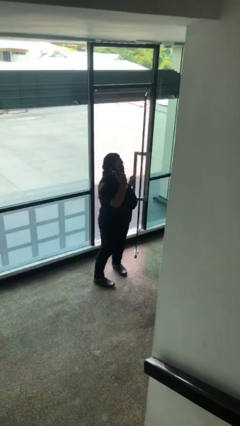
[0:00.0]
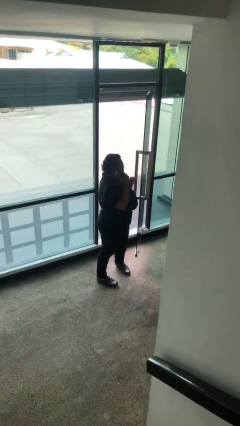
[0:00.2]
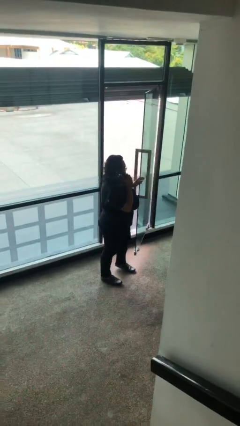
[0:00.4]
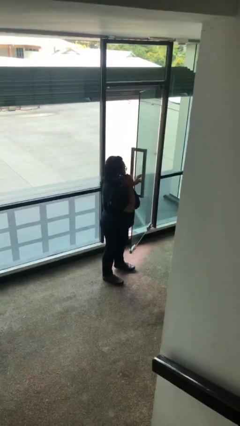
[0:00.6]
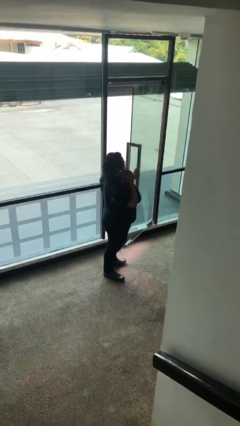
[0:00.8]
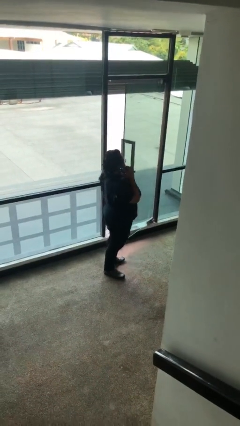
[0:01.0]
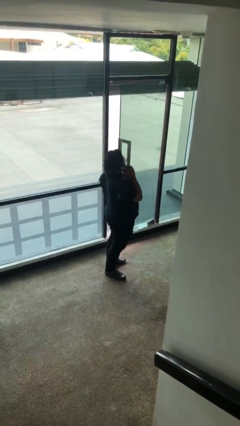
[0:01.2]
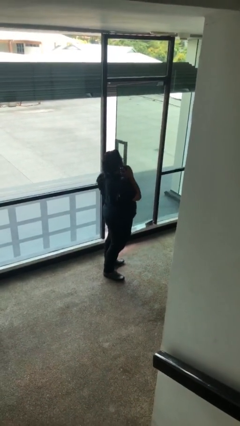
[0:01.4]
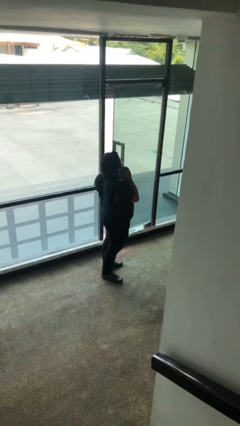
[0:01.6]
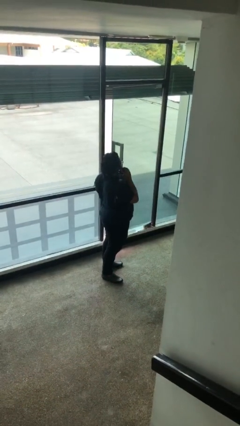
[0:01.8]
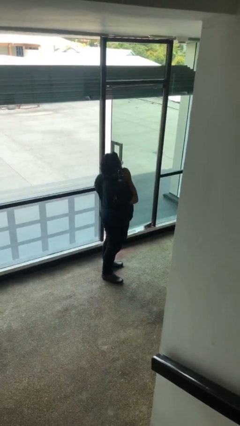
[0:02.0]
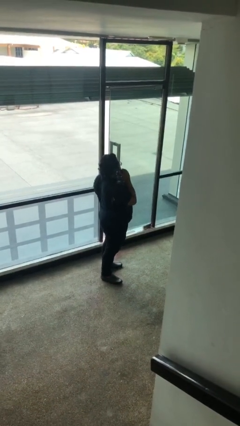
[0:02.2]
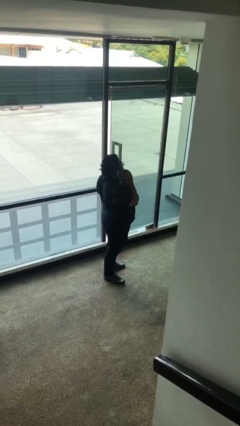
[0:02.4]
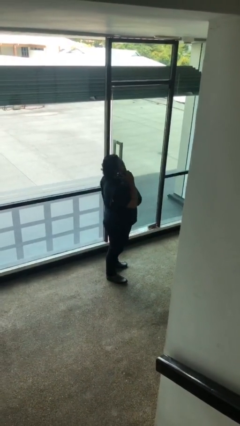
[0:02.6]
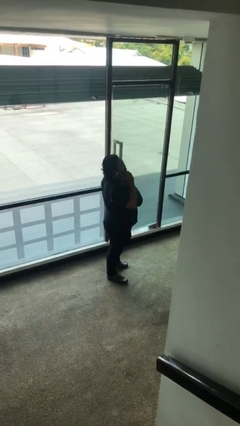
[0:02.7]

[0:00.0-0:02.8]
person closes facility door

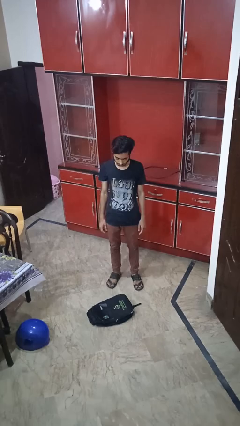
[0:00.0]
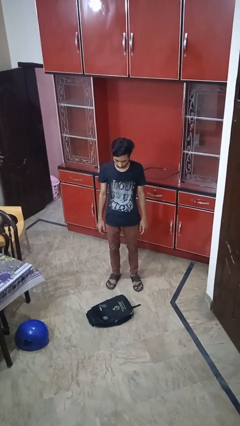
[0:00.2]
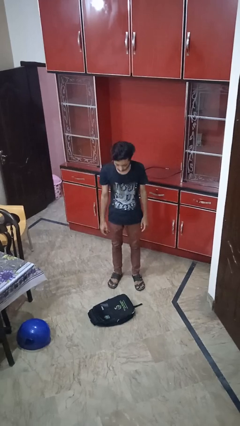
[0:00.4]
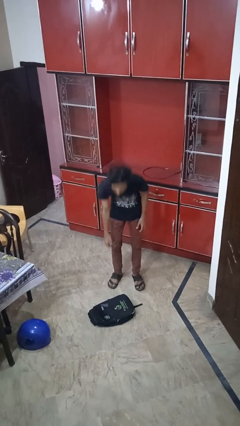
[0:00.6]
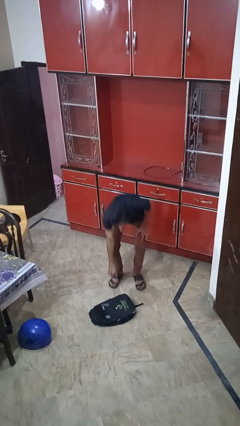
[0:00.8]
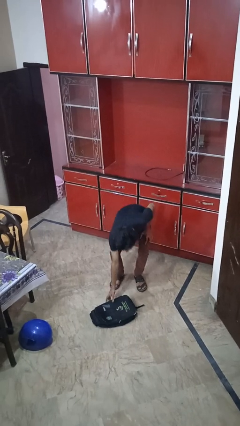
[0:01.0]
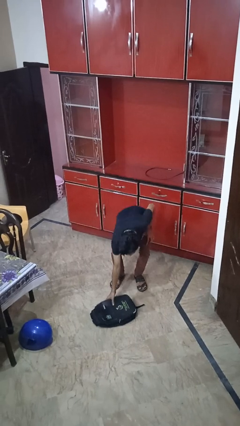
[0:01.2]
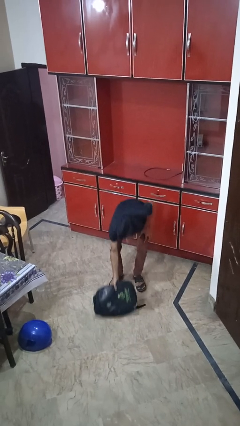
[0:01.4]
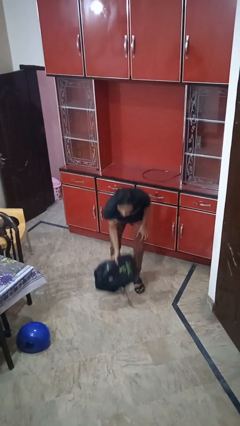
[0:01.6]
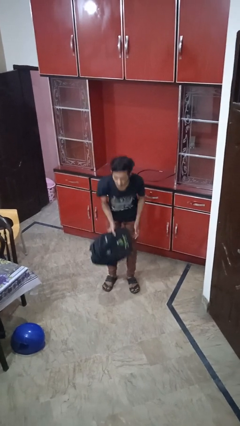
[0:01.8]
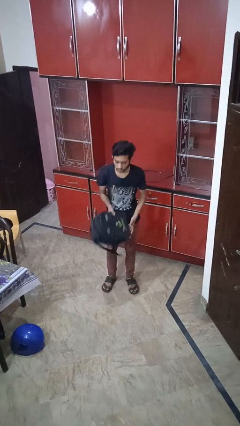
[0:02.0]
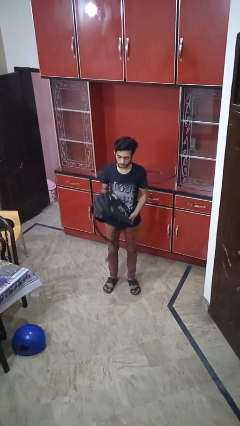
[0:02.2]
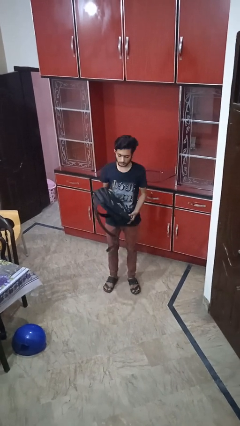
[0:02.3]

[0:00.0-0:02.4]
person picks up object from floor

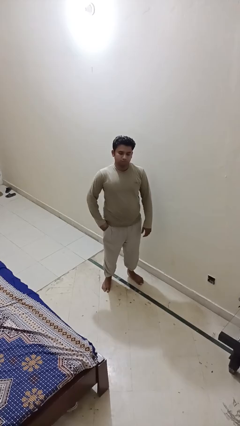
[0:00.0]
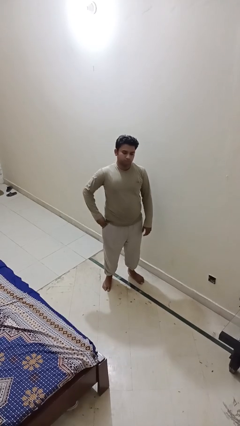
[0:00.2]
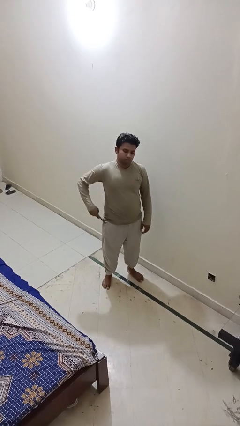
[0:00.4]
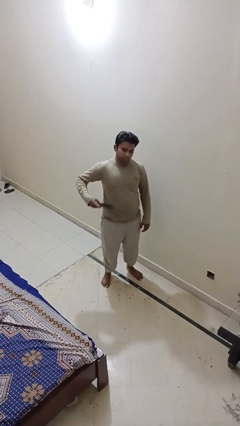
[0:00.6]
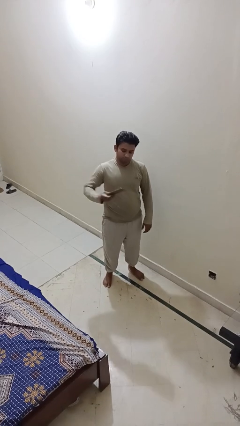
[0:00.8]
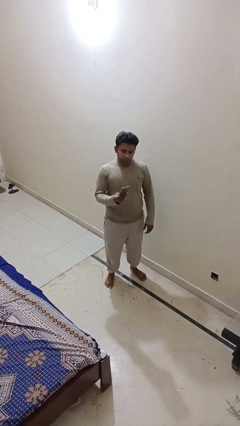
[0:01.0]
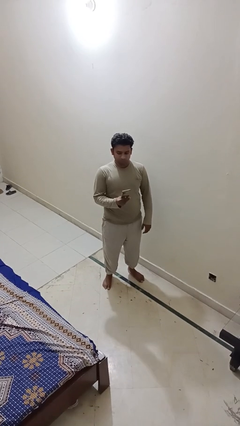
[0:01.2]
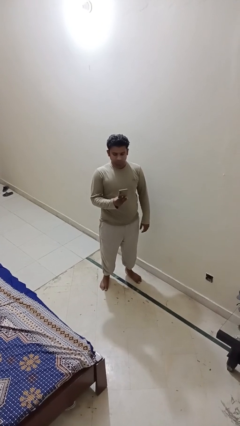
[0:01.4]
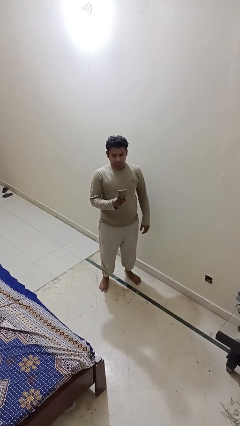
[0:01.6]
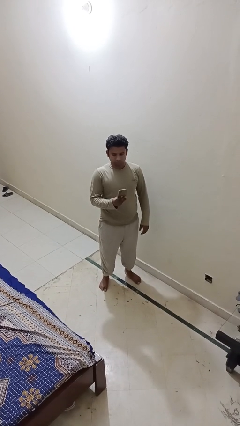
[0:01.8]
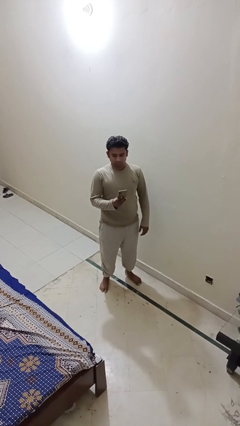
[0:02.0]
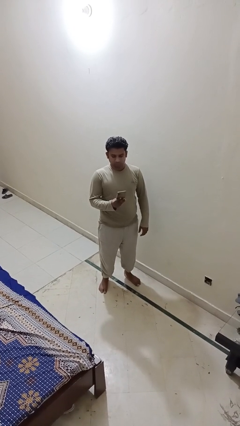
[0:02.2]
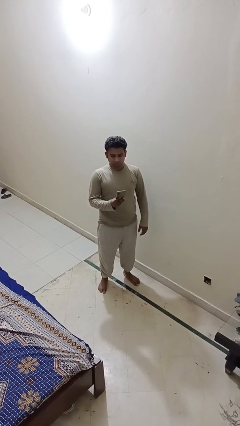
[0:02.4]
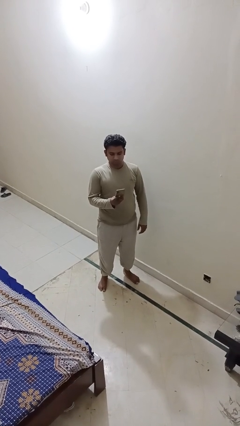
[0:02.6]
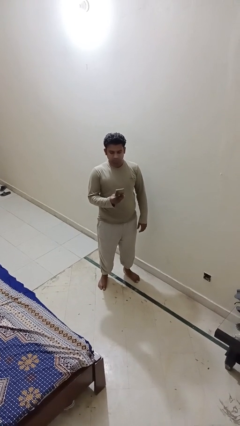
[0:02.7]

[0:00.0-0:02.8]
person takes phone from pocket

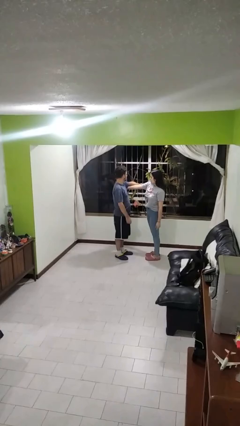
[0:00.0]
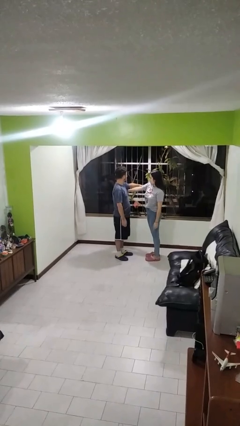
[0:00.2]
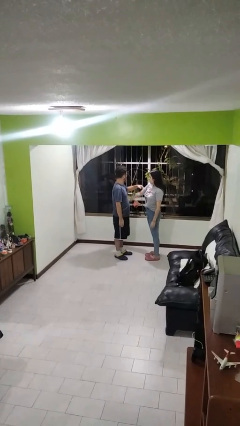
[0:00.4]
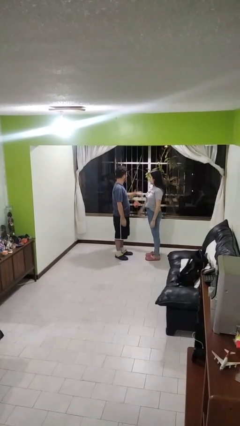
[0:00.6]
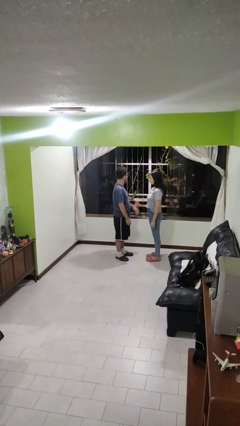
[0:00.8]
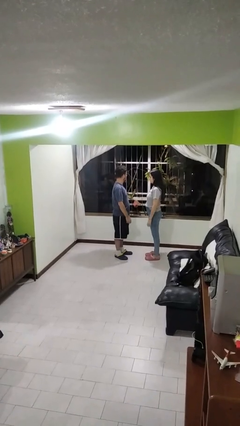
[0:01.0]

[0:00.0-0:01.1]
person grabs person by bicep

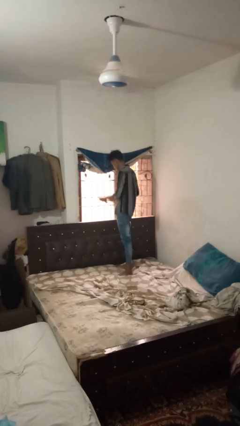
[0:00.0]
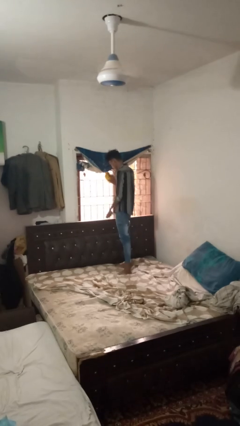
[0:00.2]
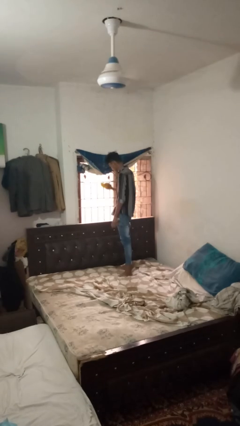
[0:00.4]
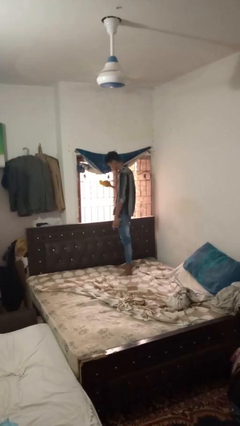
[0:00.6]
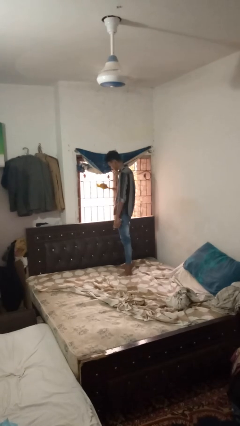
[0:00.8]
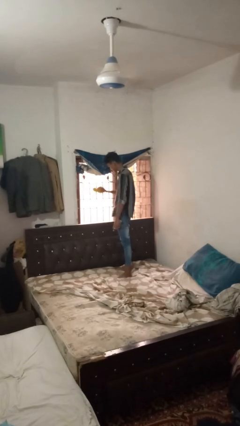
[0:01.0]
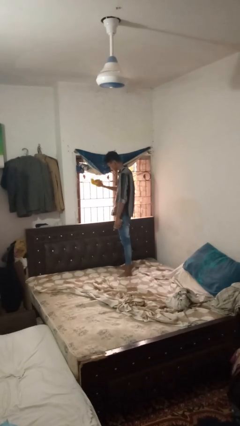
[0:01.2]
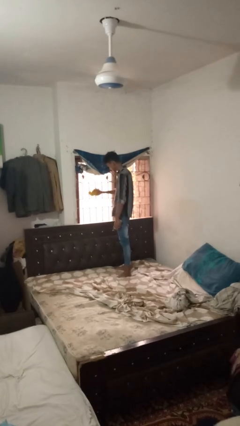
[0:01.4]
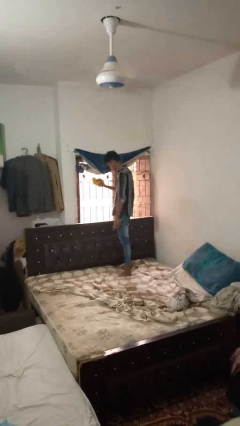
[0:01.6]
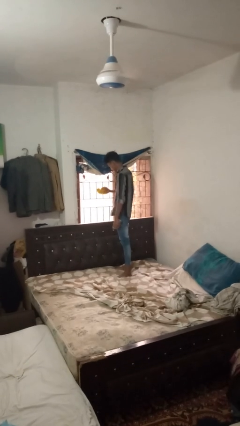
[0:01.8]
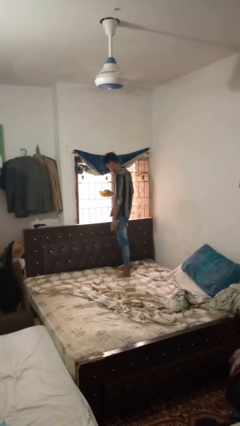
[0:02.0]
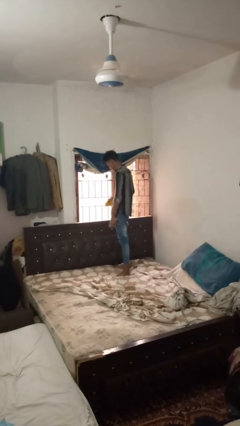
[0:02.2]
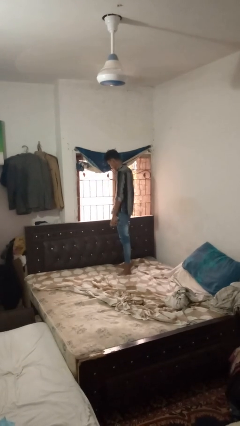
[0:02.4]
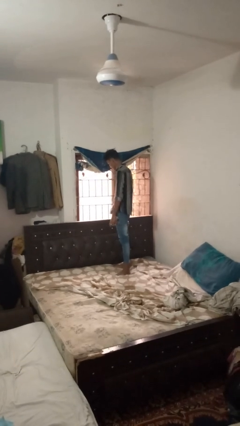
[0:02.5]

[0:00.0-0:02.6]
person washes window

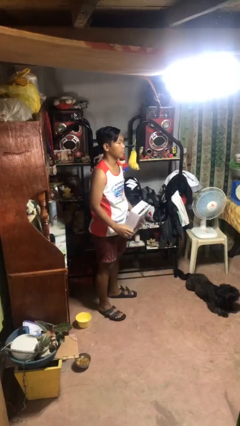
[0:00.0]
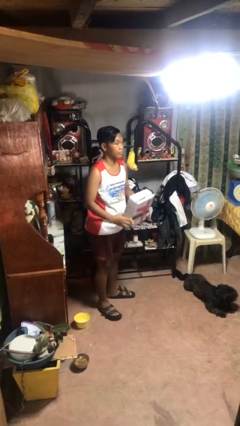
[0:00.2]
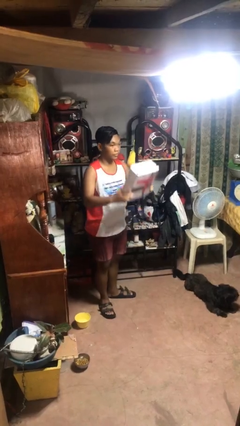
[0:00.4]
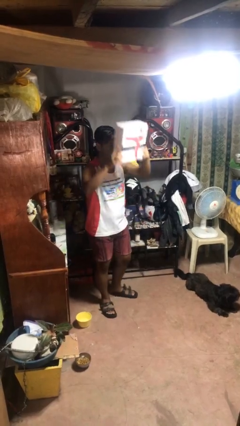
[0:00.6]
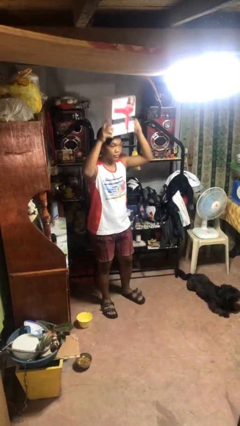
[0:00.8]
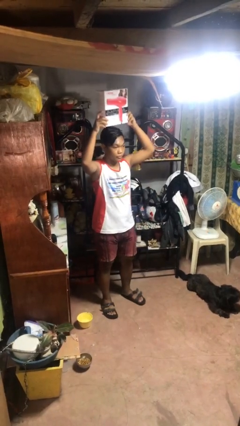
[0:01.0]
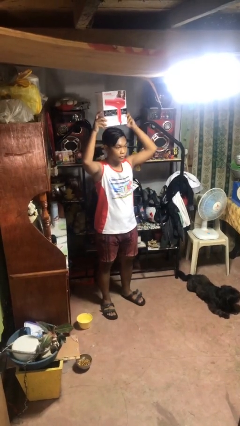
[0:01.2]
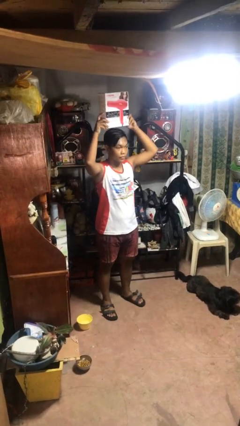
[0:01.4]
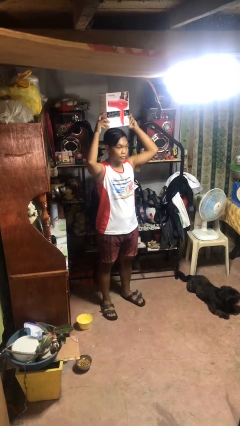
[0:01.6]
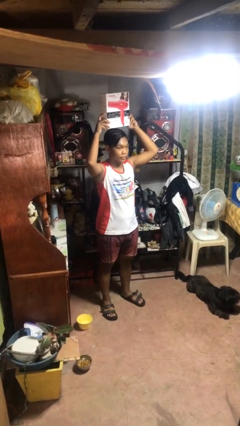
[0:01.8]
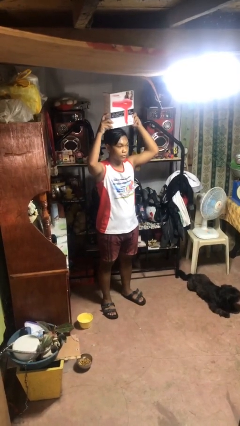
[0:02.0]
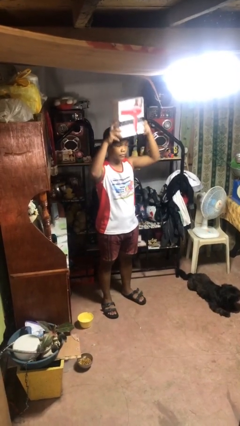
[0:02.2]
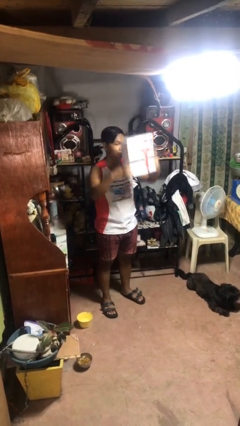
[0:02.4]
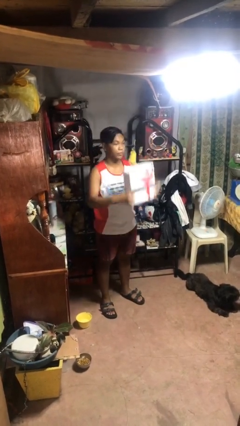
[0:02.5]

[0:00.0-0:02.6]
person holds object above head

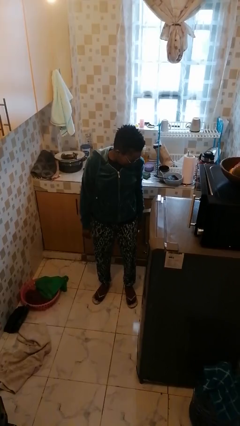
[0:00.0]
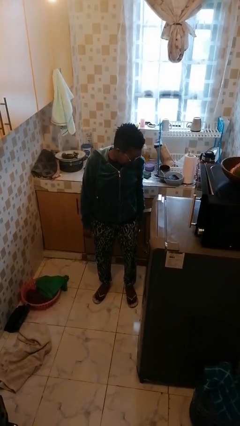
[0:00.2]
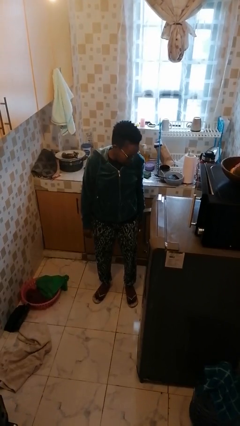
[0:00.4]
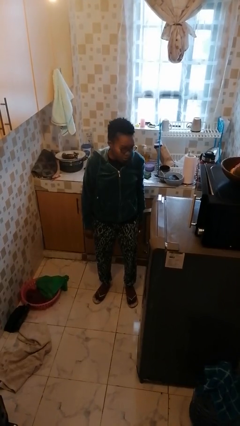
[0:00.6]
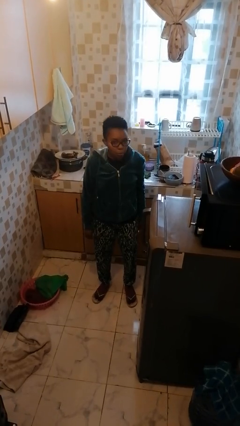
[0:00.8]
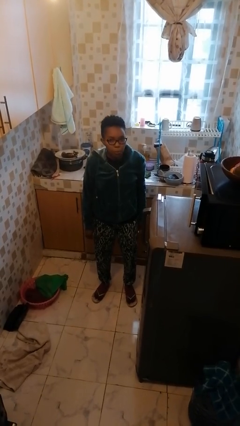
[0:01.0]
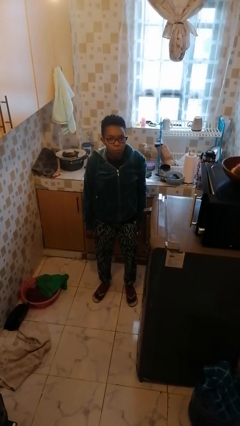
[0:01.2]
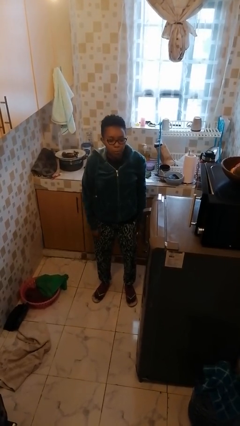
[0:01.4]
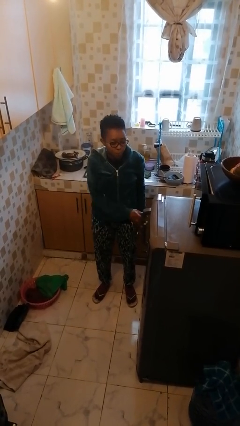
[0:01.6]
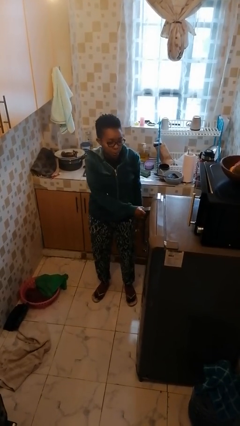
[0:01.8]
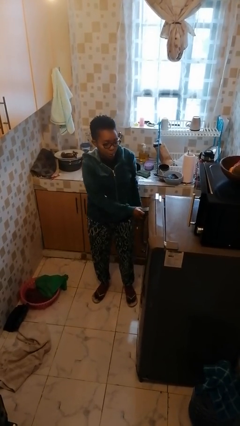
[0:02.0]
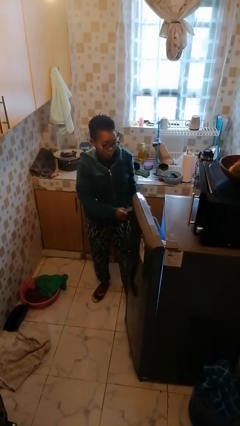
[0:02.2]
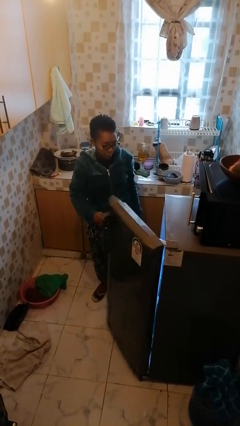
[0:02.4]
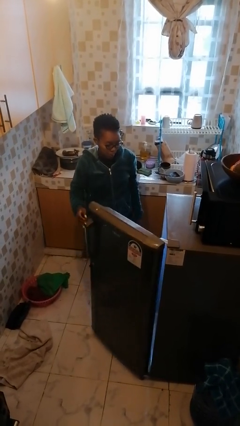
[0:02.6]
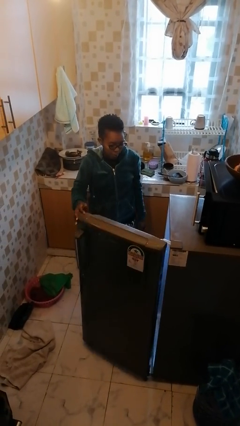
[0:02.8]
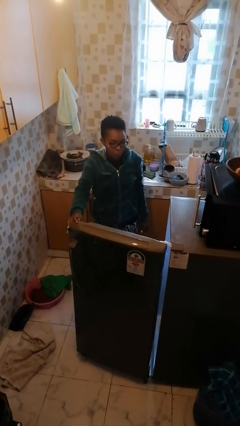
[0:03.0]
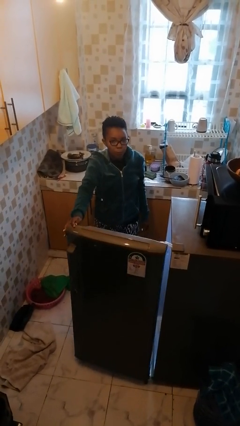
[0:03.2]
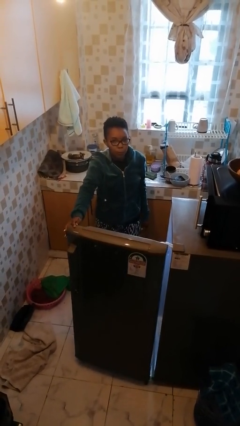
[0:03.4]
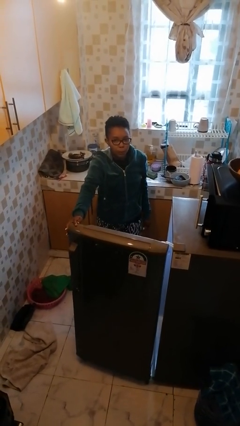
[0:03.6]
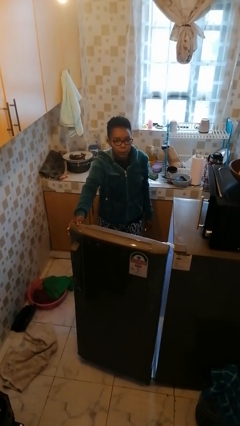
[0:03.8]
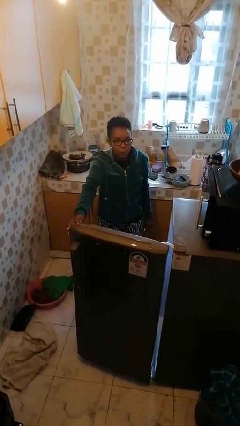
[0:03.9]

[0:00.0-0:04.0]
person opens refrigerator
